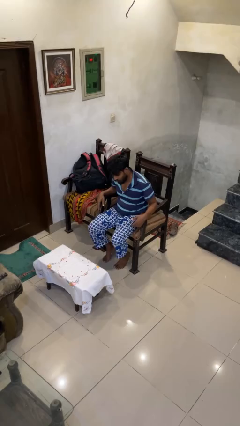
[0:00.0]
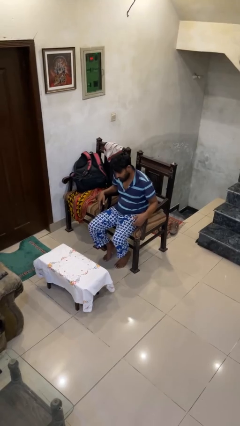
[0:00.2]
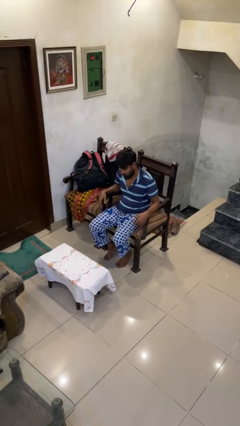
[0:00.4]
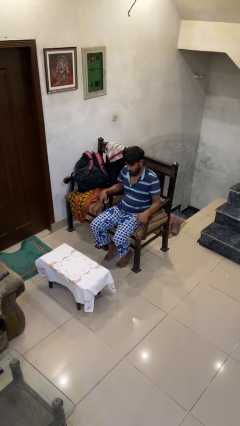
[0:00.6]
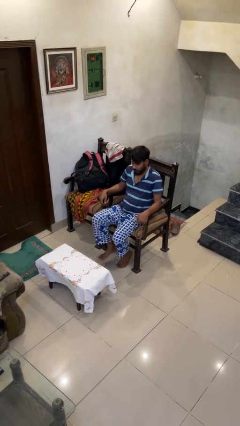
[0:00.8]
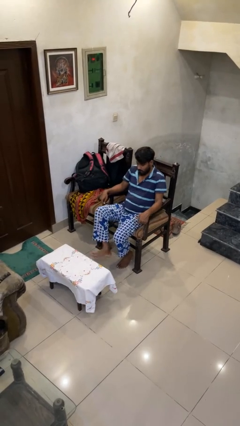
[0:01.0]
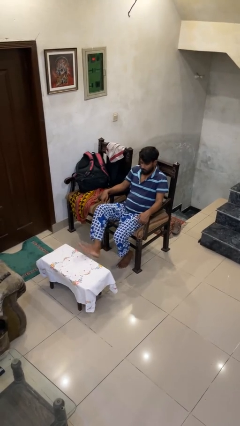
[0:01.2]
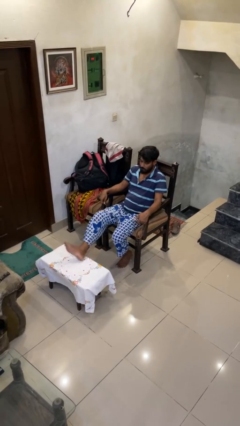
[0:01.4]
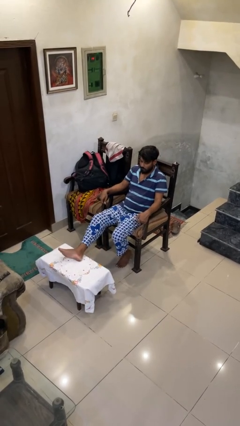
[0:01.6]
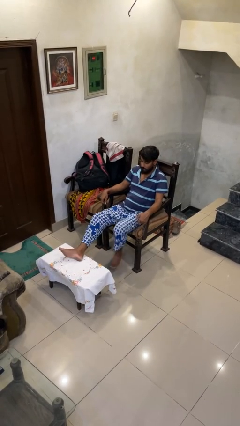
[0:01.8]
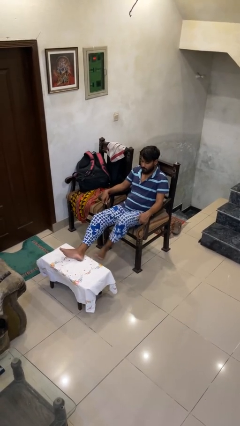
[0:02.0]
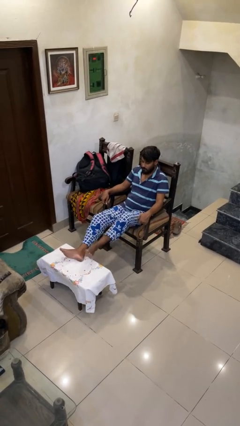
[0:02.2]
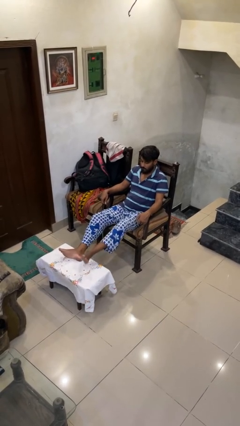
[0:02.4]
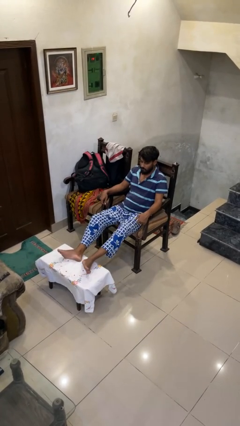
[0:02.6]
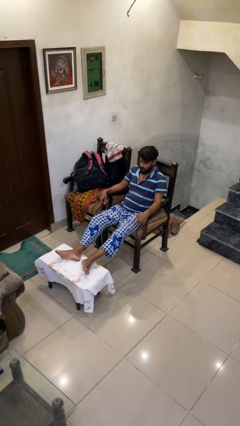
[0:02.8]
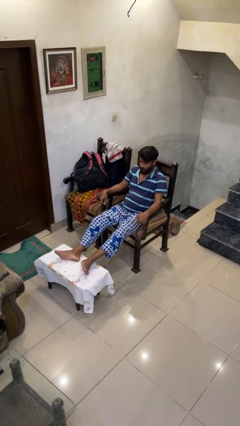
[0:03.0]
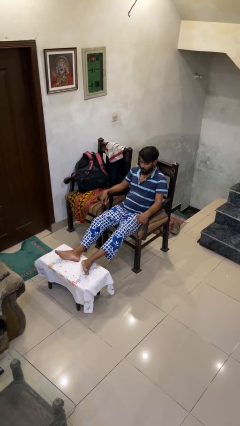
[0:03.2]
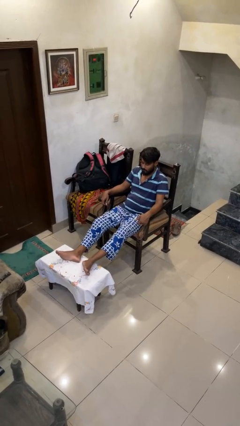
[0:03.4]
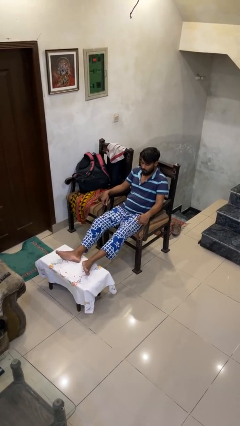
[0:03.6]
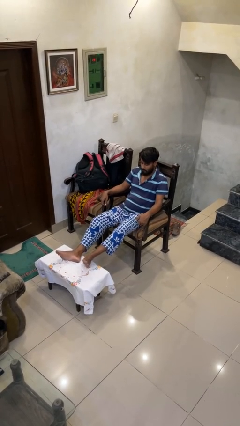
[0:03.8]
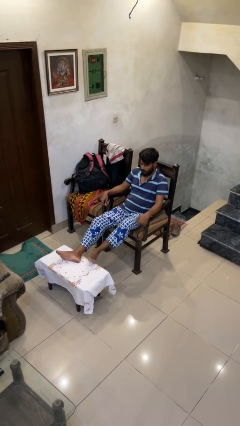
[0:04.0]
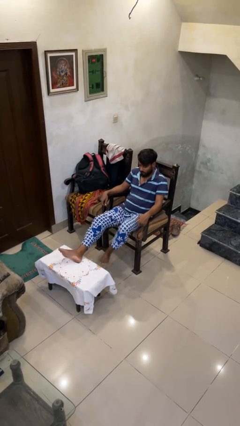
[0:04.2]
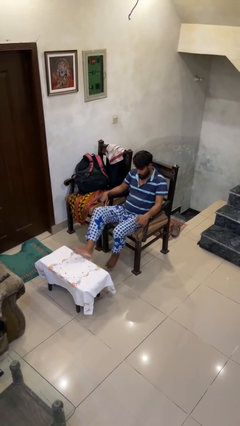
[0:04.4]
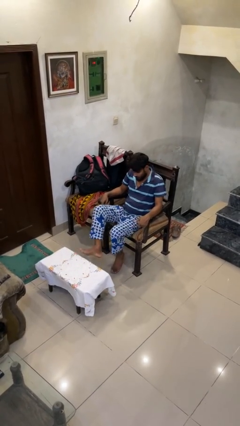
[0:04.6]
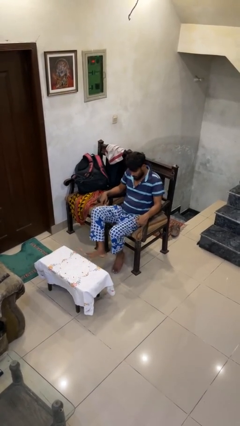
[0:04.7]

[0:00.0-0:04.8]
person puts feet up

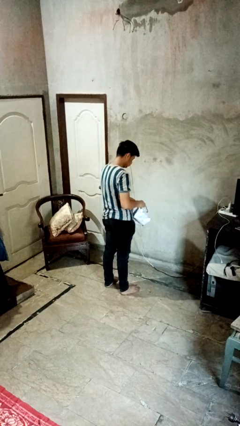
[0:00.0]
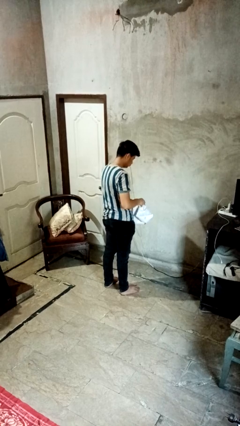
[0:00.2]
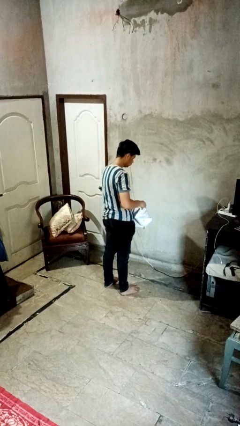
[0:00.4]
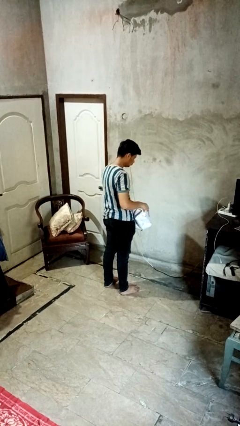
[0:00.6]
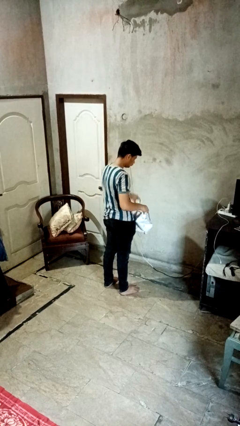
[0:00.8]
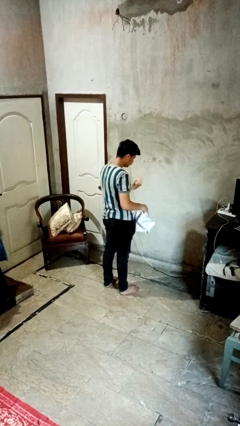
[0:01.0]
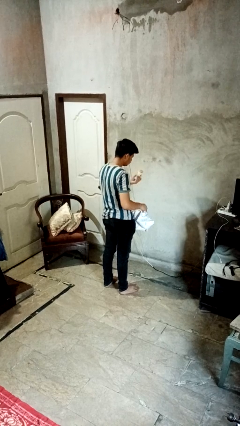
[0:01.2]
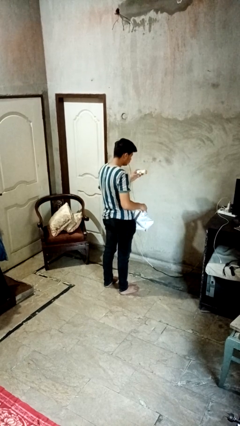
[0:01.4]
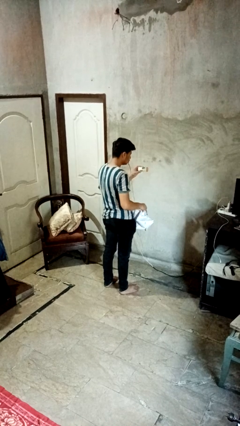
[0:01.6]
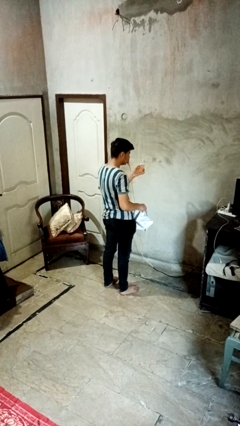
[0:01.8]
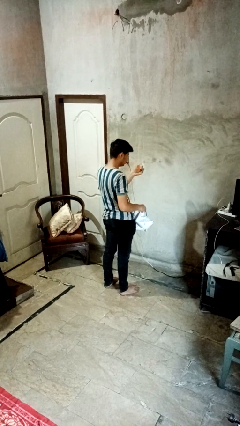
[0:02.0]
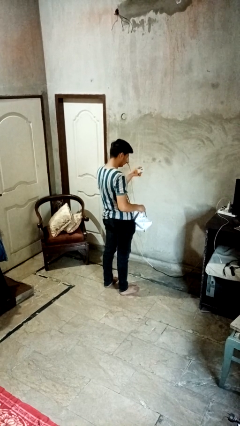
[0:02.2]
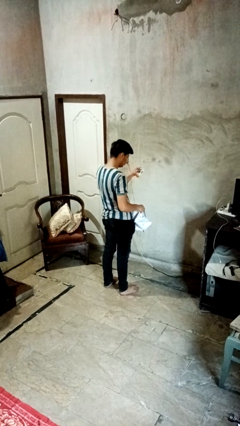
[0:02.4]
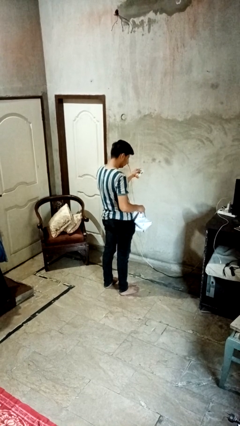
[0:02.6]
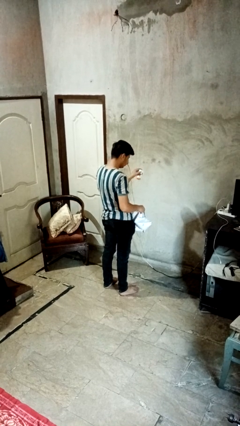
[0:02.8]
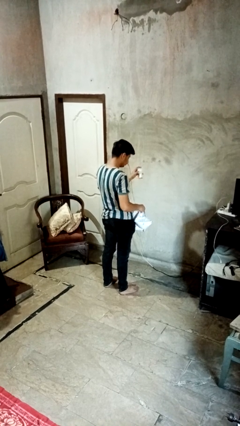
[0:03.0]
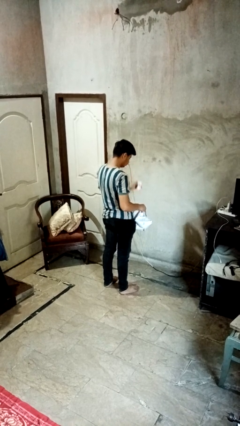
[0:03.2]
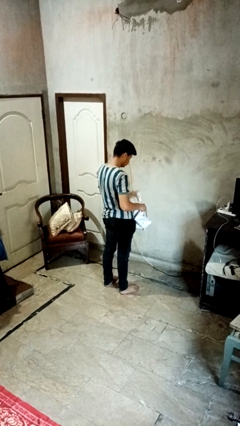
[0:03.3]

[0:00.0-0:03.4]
person searches in bag

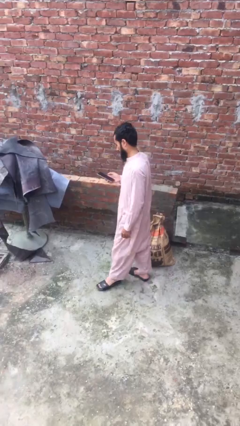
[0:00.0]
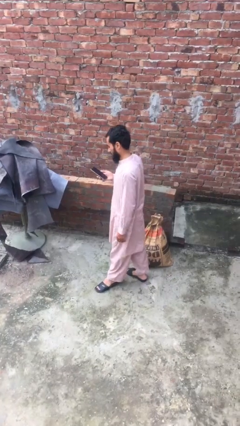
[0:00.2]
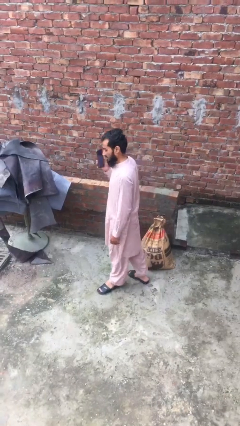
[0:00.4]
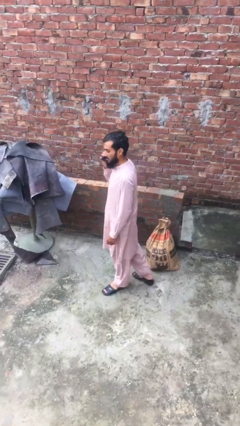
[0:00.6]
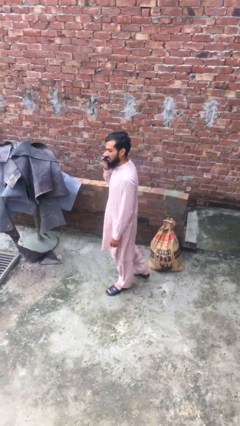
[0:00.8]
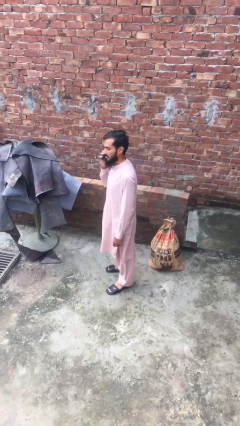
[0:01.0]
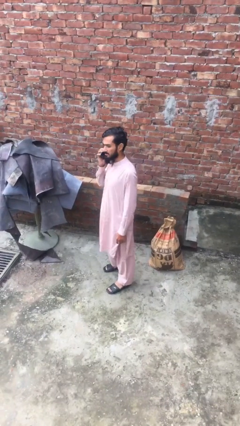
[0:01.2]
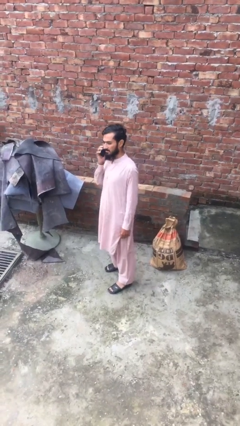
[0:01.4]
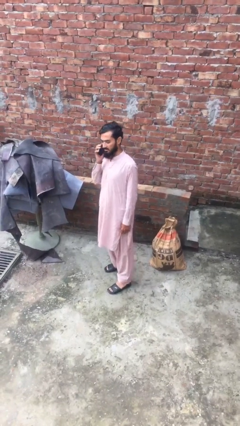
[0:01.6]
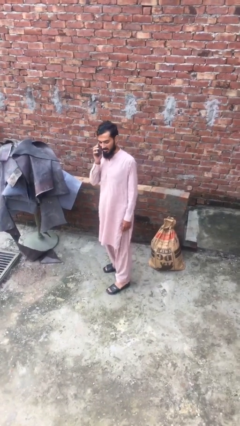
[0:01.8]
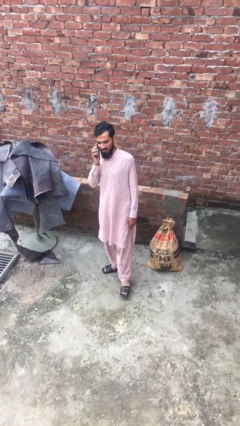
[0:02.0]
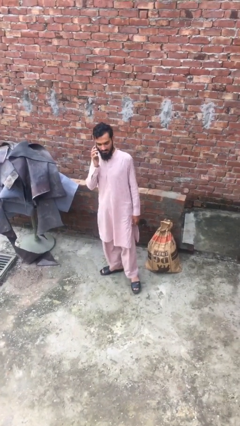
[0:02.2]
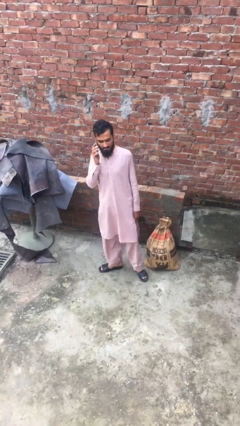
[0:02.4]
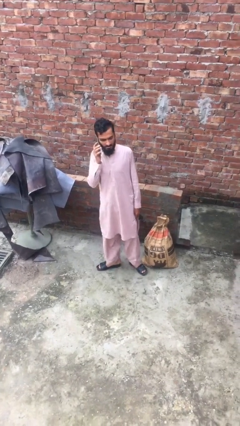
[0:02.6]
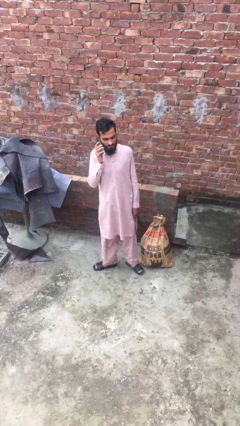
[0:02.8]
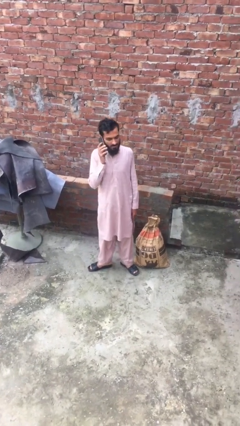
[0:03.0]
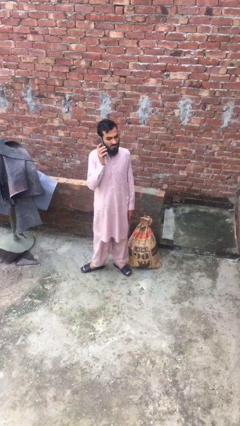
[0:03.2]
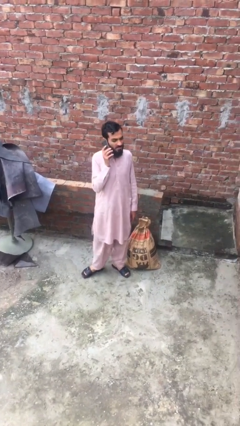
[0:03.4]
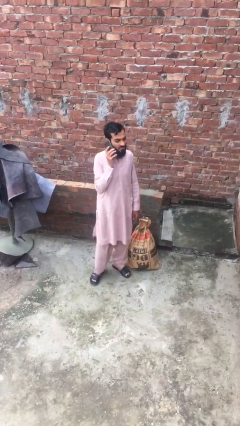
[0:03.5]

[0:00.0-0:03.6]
person talks on phone

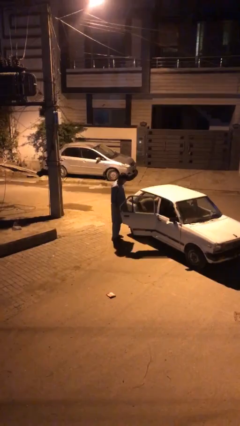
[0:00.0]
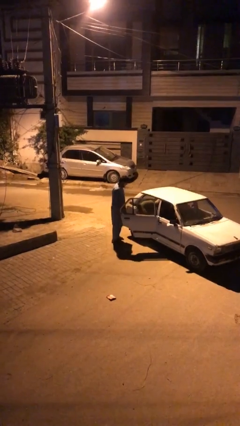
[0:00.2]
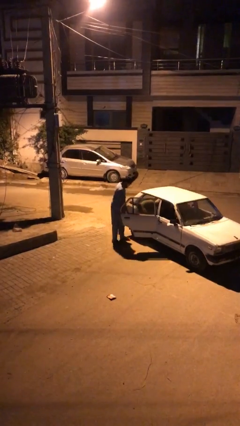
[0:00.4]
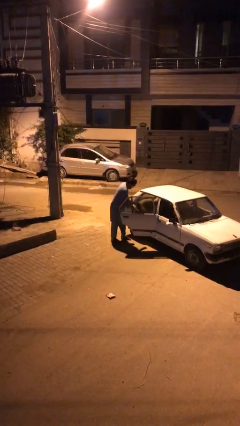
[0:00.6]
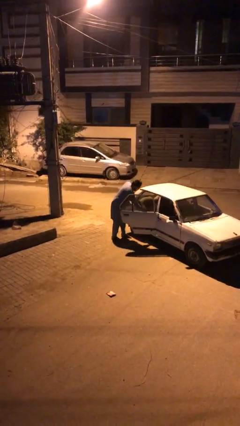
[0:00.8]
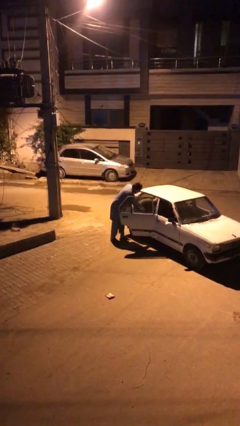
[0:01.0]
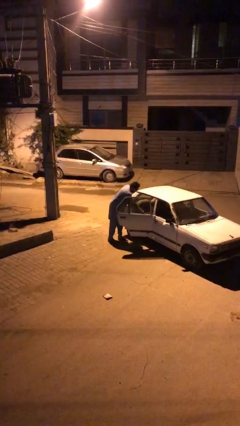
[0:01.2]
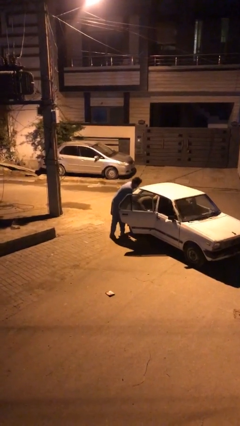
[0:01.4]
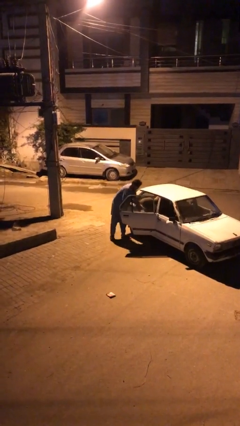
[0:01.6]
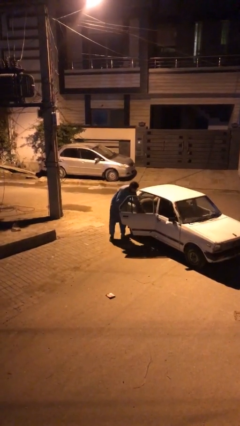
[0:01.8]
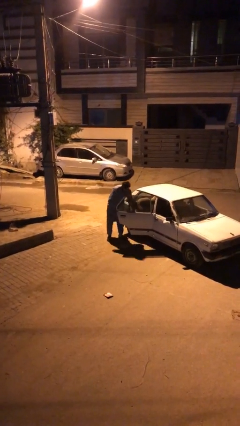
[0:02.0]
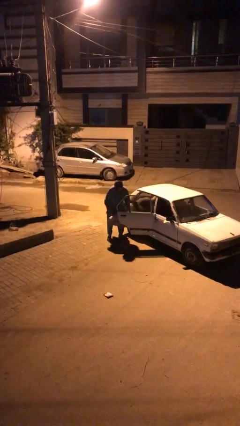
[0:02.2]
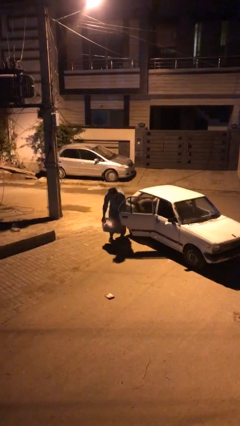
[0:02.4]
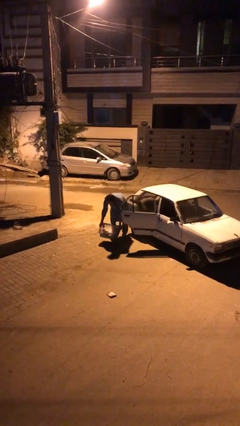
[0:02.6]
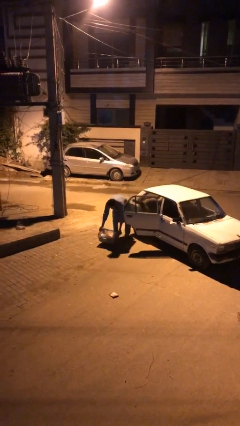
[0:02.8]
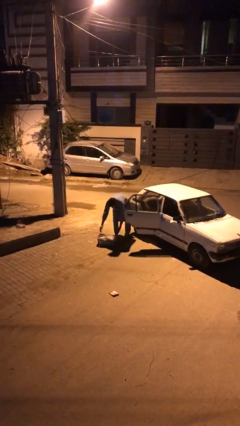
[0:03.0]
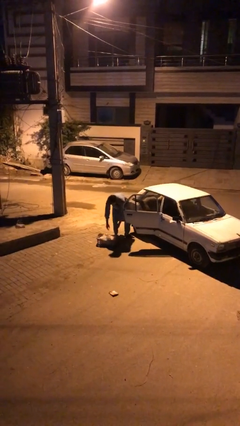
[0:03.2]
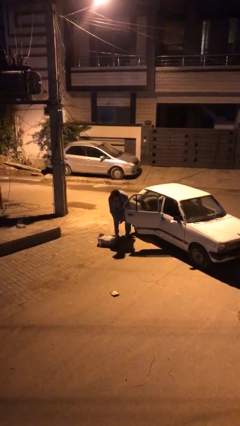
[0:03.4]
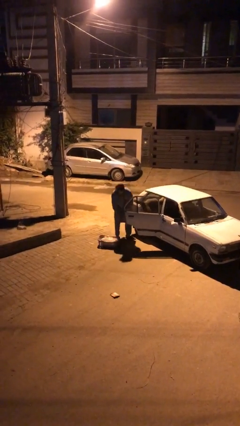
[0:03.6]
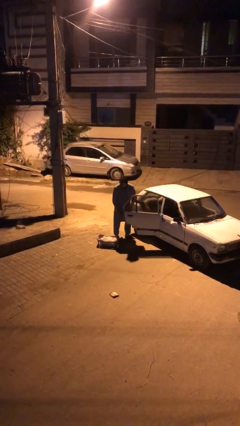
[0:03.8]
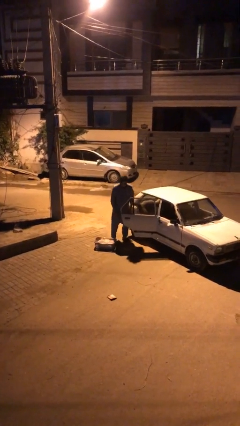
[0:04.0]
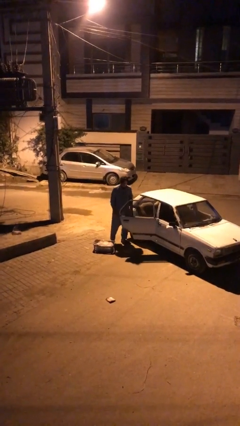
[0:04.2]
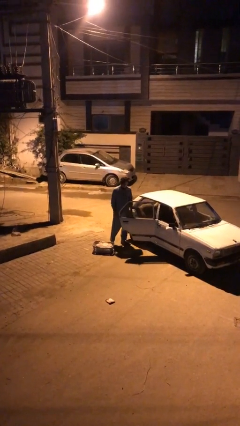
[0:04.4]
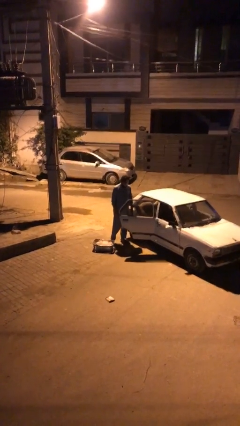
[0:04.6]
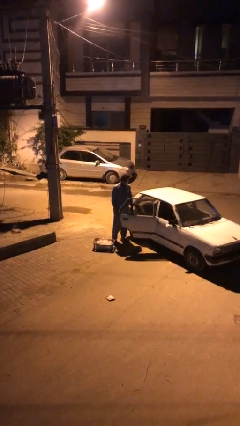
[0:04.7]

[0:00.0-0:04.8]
person unloads car

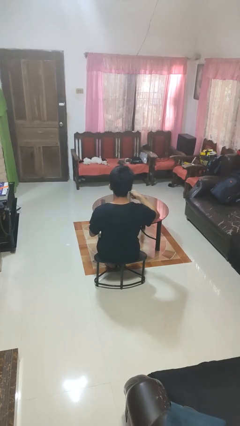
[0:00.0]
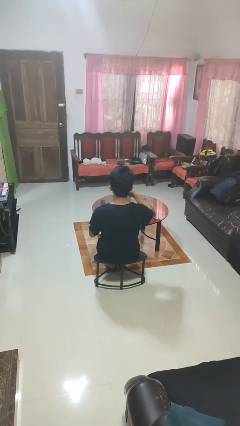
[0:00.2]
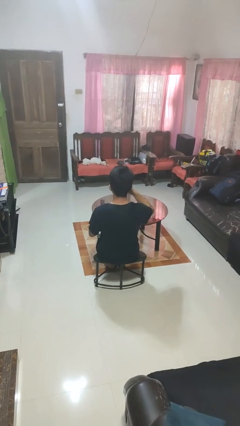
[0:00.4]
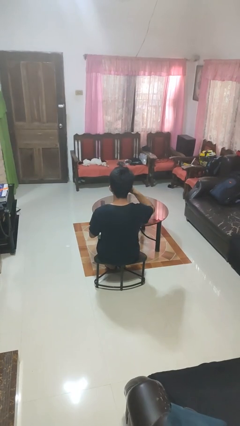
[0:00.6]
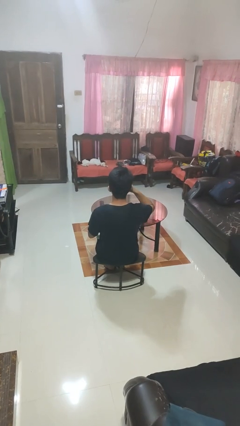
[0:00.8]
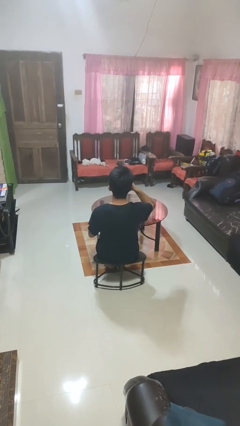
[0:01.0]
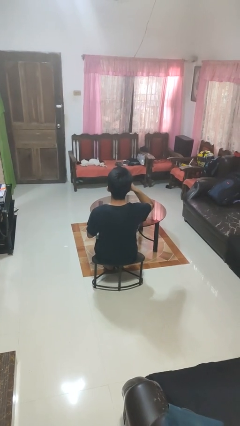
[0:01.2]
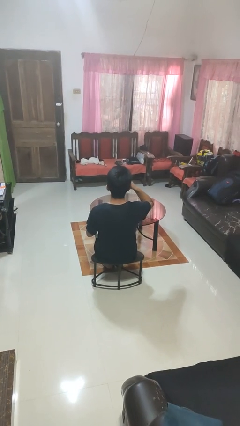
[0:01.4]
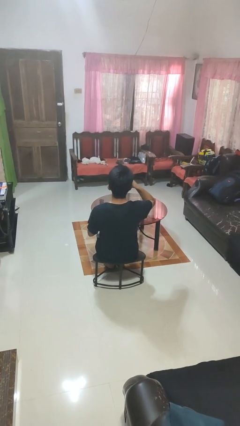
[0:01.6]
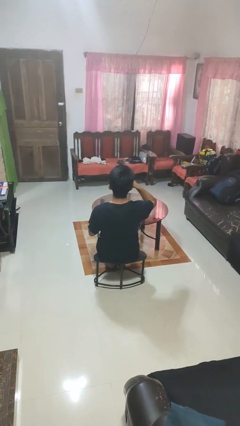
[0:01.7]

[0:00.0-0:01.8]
person drinks from mug
